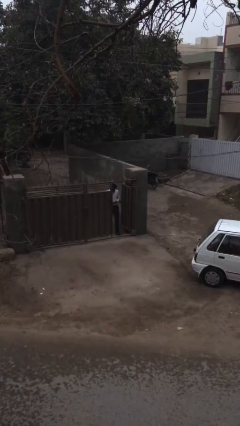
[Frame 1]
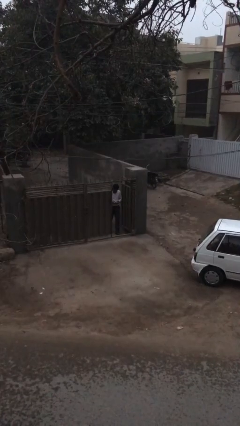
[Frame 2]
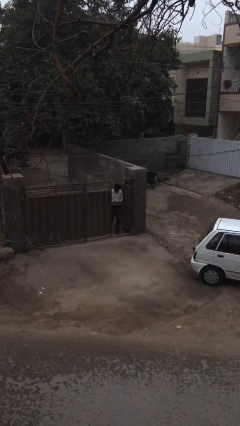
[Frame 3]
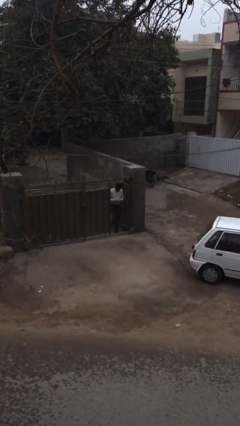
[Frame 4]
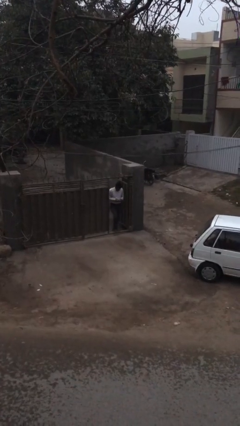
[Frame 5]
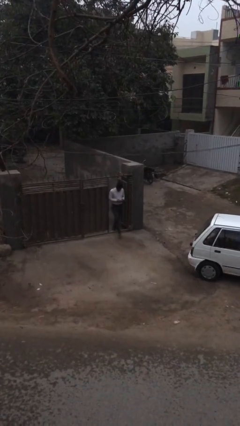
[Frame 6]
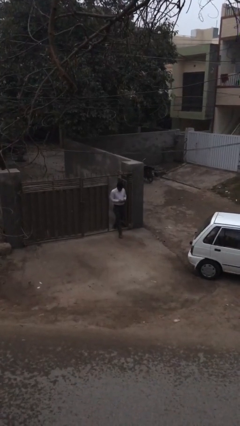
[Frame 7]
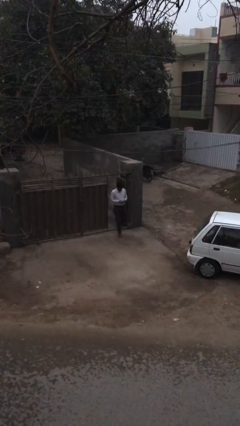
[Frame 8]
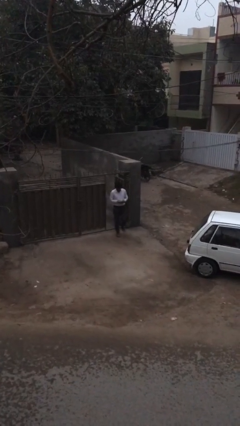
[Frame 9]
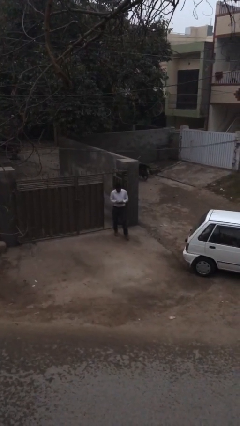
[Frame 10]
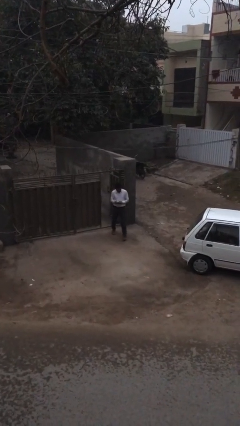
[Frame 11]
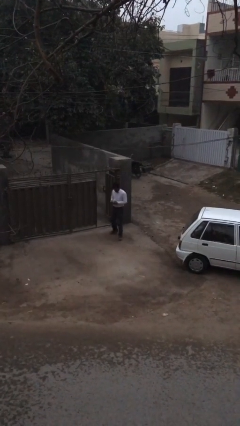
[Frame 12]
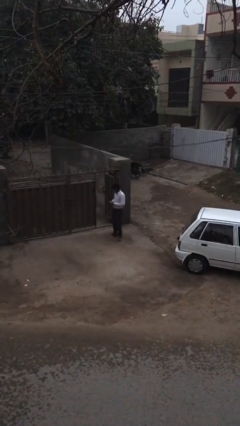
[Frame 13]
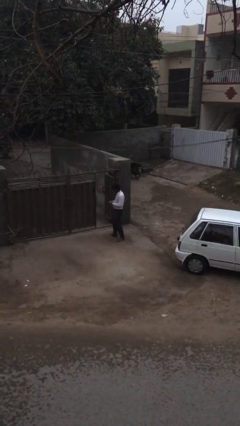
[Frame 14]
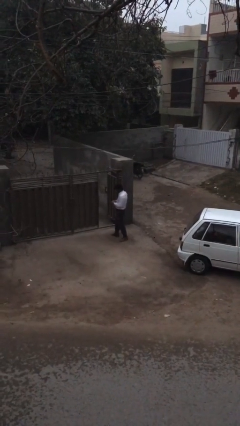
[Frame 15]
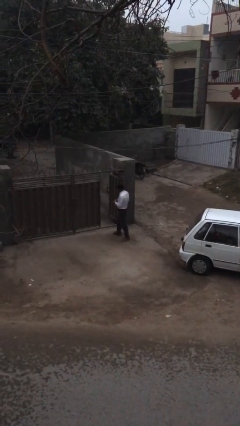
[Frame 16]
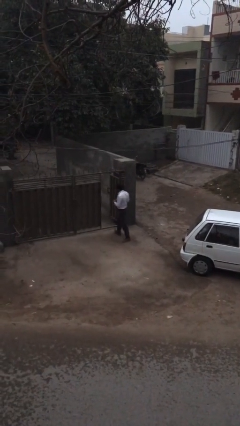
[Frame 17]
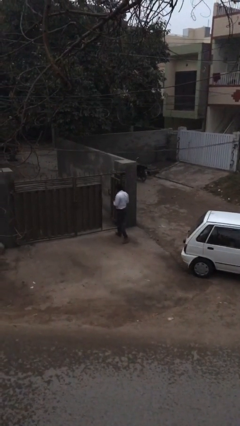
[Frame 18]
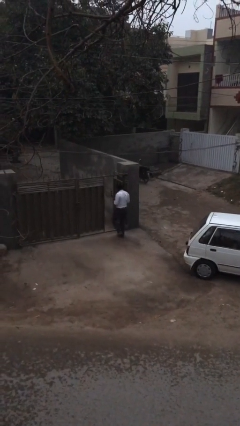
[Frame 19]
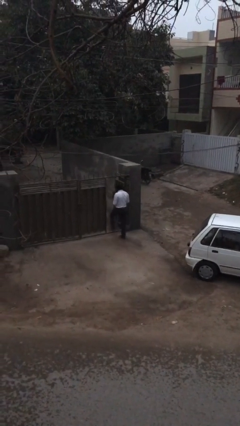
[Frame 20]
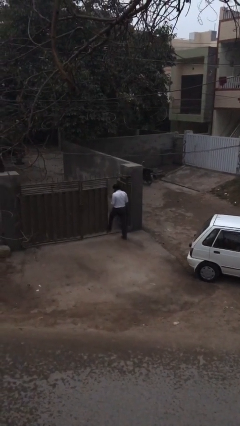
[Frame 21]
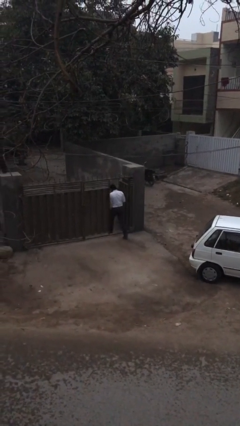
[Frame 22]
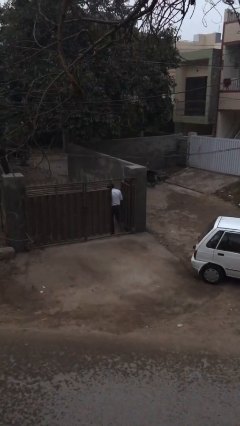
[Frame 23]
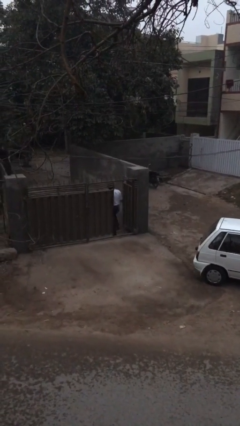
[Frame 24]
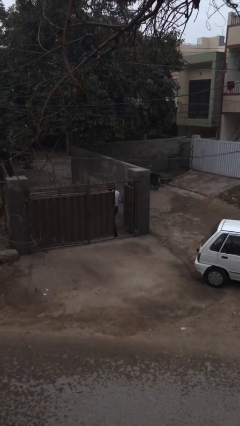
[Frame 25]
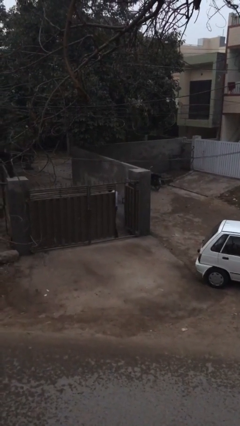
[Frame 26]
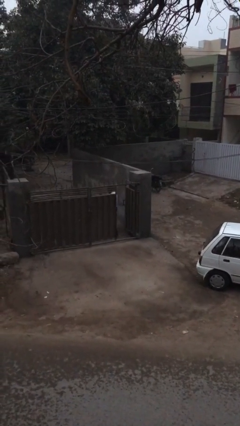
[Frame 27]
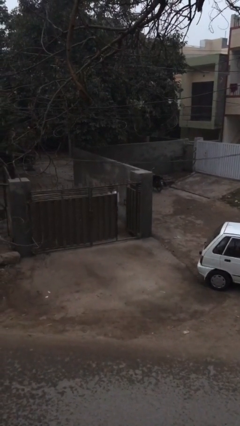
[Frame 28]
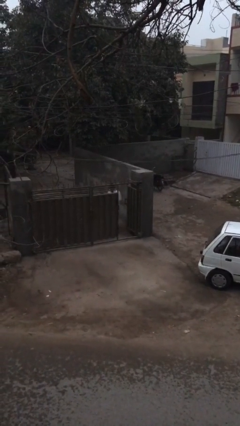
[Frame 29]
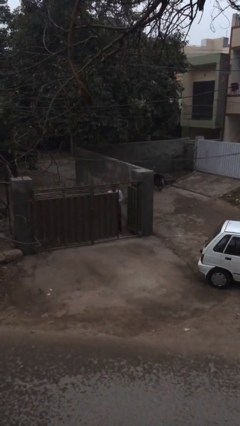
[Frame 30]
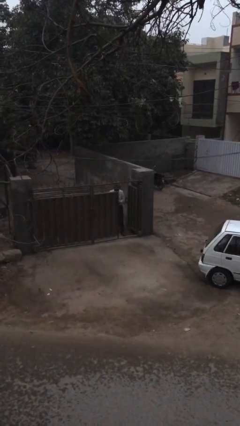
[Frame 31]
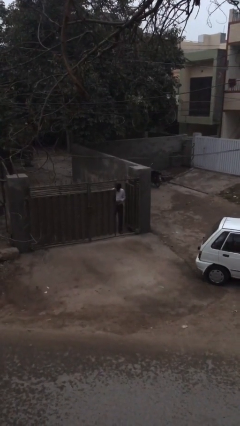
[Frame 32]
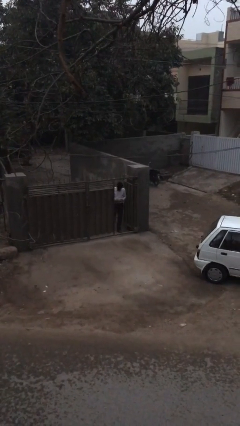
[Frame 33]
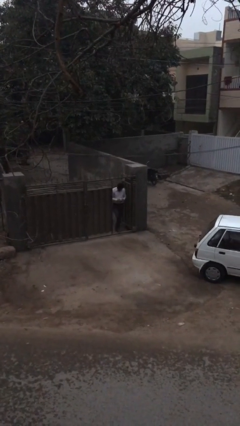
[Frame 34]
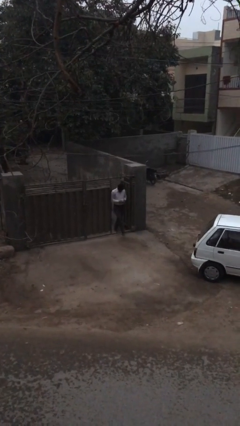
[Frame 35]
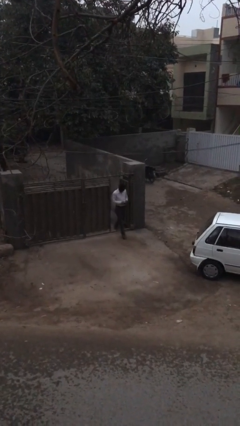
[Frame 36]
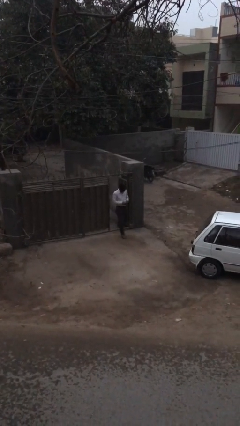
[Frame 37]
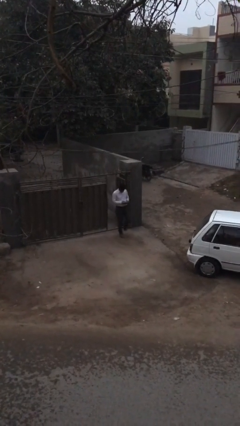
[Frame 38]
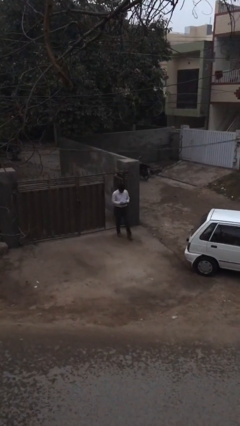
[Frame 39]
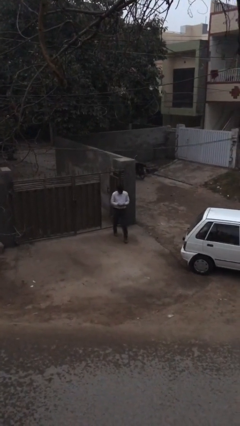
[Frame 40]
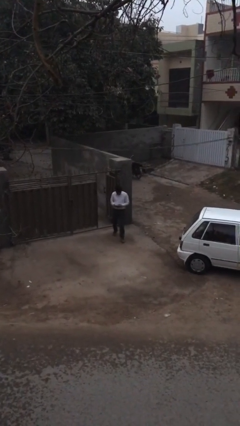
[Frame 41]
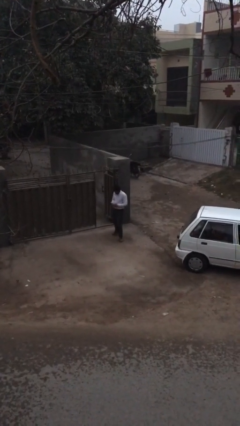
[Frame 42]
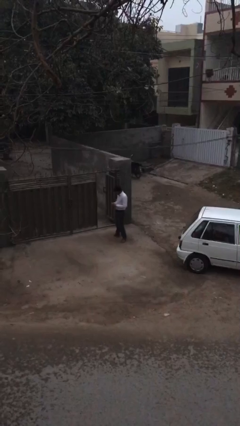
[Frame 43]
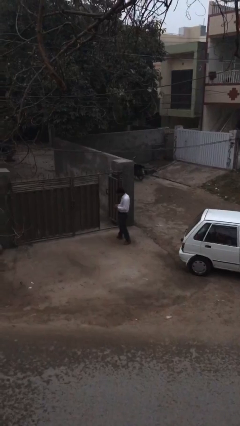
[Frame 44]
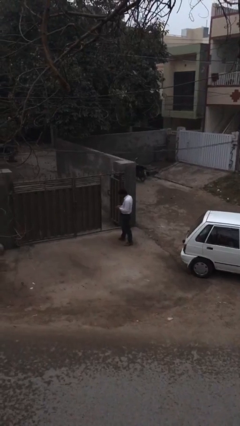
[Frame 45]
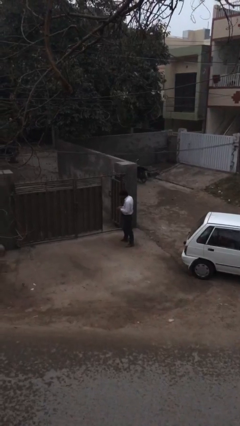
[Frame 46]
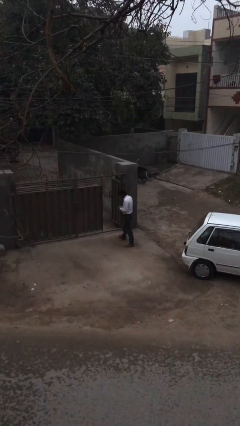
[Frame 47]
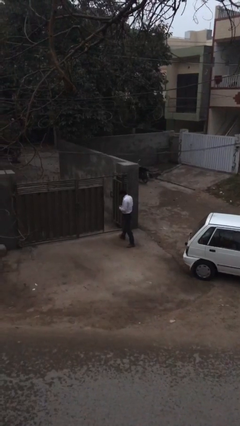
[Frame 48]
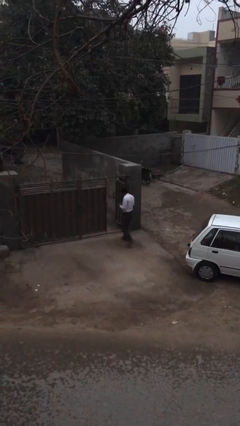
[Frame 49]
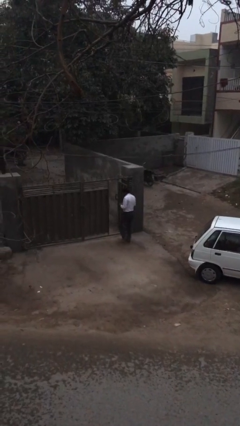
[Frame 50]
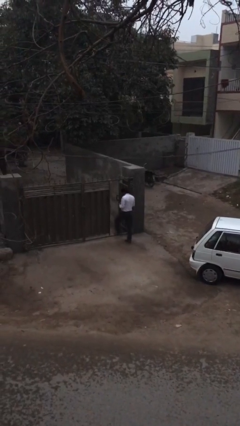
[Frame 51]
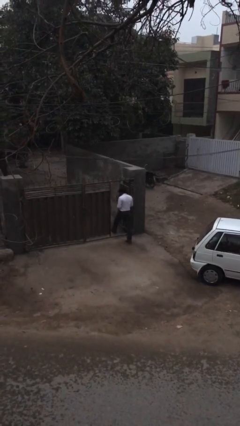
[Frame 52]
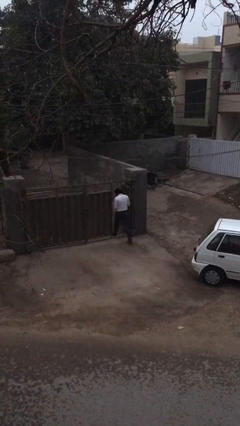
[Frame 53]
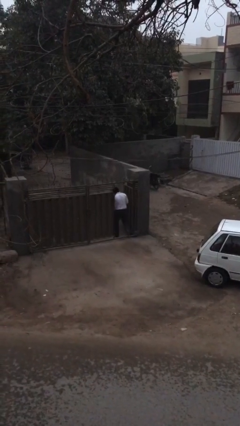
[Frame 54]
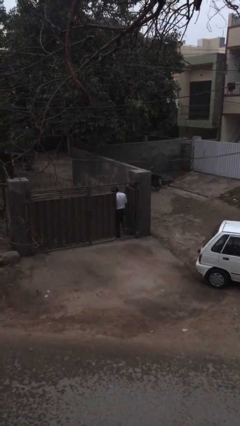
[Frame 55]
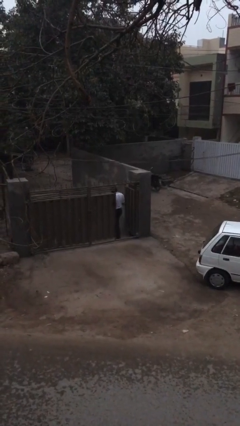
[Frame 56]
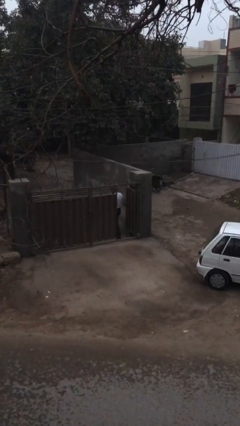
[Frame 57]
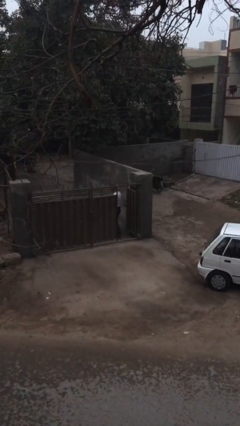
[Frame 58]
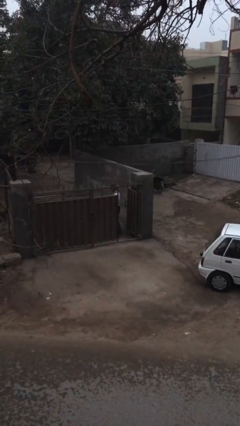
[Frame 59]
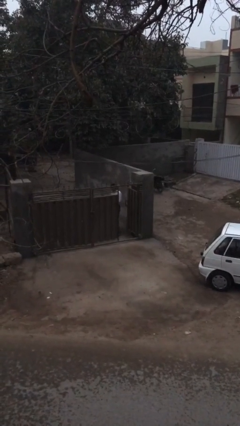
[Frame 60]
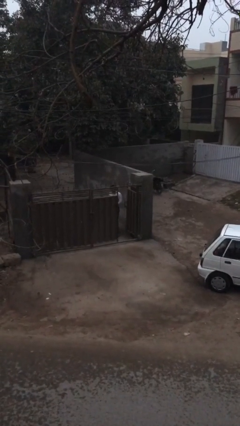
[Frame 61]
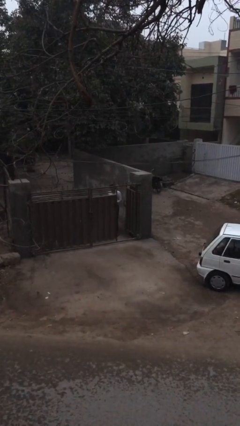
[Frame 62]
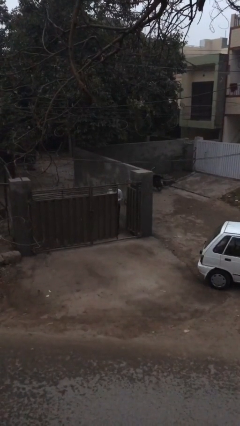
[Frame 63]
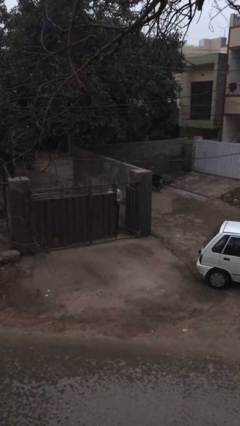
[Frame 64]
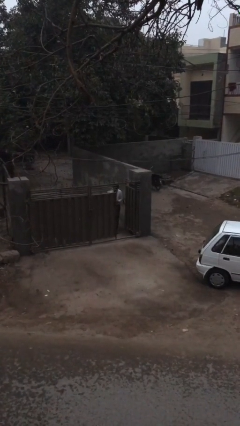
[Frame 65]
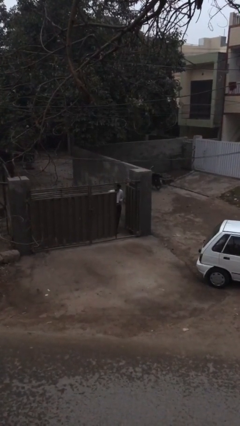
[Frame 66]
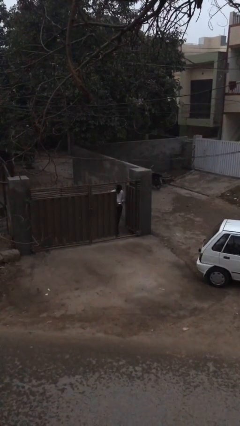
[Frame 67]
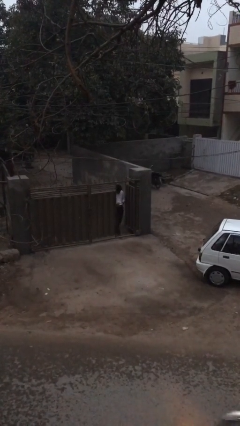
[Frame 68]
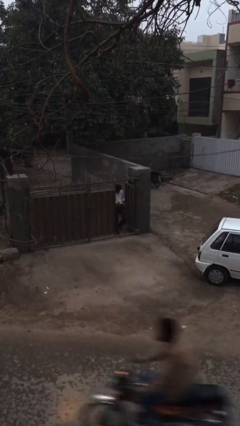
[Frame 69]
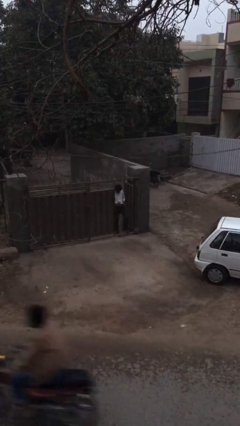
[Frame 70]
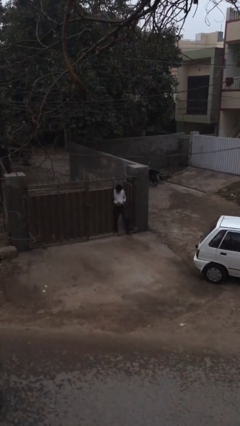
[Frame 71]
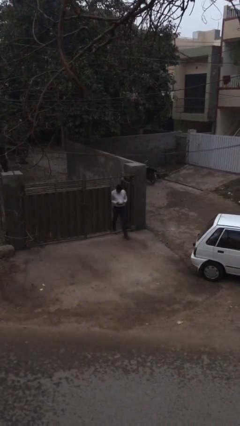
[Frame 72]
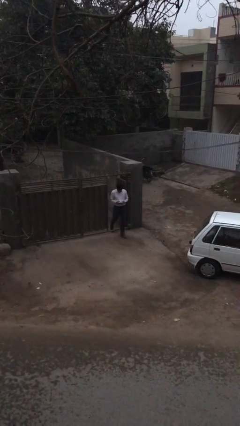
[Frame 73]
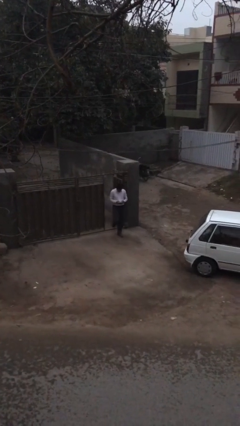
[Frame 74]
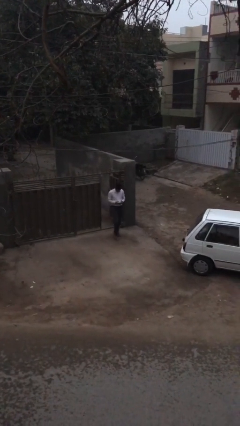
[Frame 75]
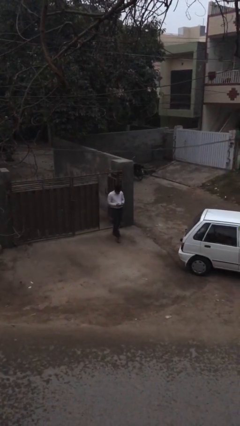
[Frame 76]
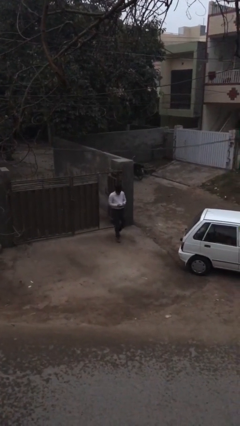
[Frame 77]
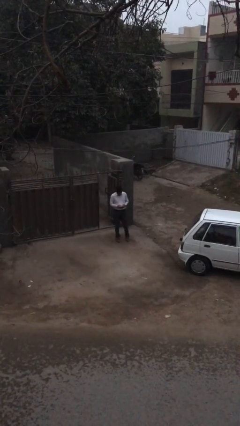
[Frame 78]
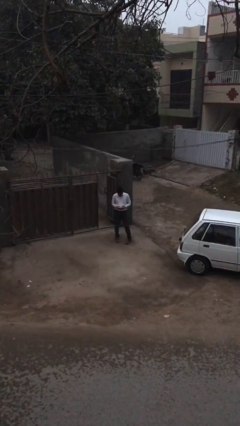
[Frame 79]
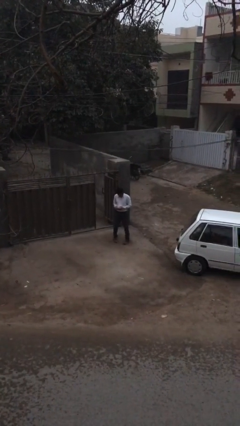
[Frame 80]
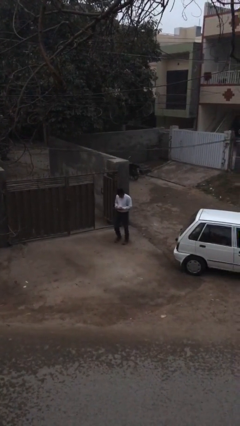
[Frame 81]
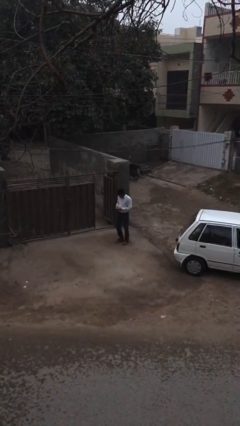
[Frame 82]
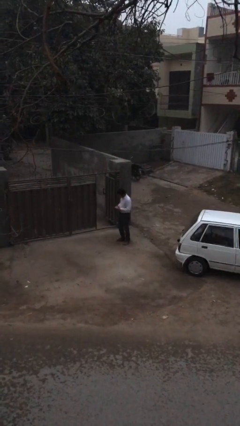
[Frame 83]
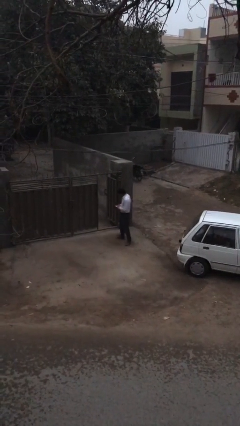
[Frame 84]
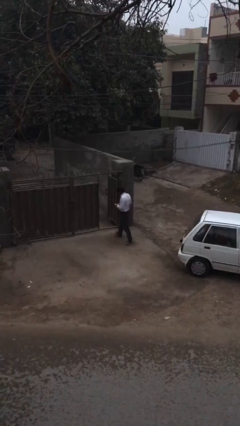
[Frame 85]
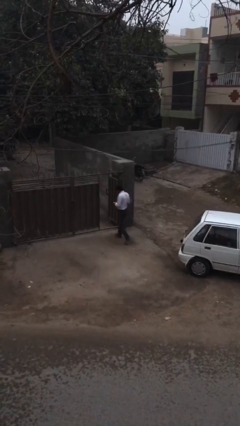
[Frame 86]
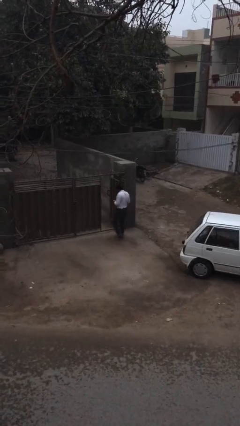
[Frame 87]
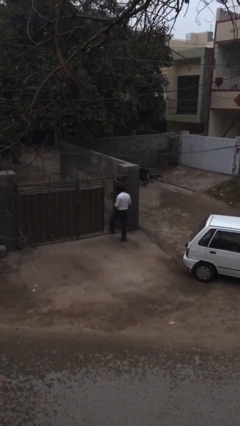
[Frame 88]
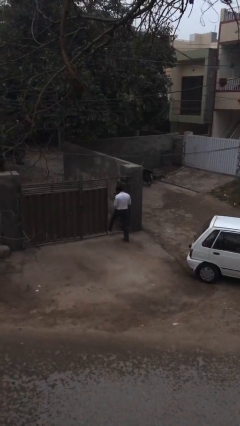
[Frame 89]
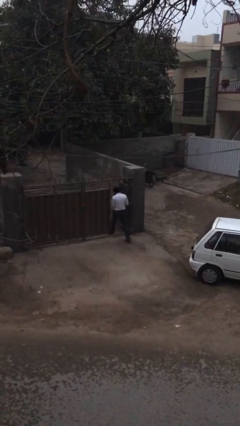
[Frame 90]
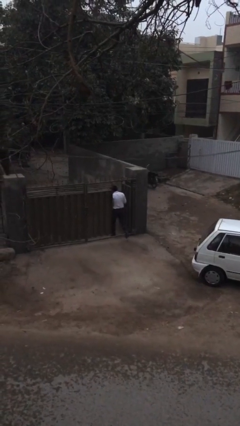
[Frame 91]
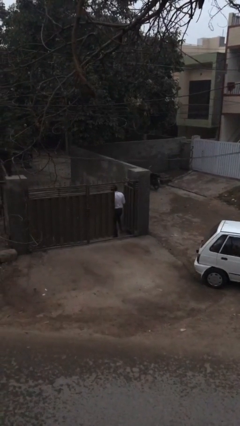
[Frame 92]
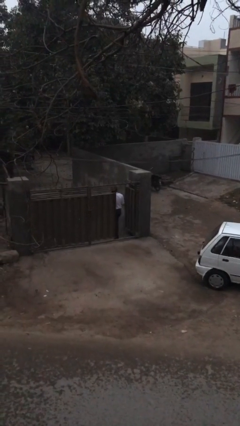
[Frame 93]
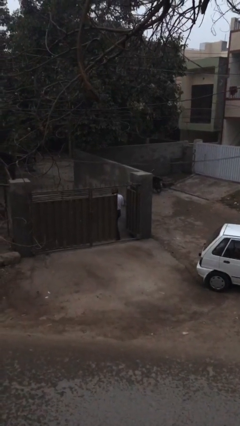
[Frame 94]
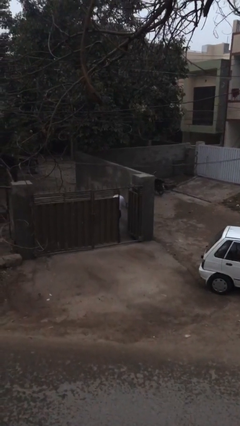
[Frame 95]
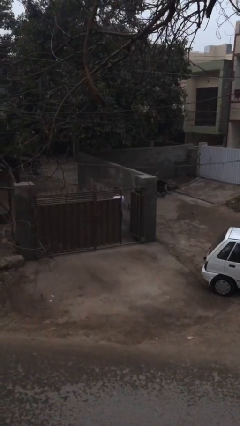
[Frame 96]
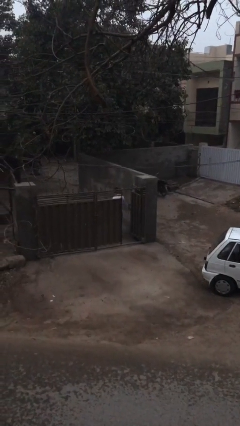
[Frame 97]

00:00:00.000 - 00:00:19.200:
person texts on phone
